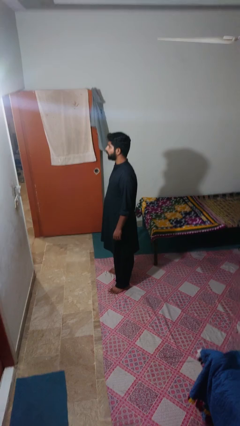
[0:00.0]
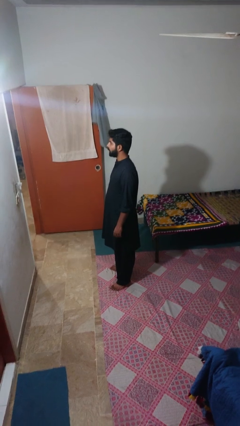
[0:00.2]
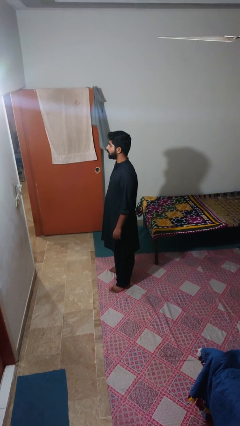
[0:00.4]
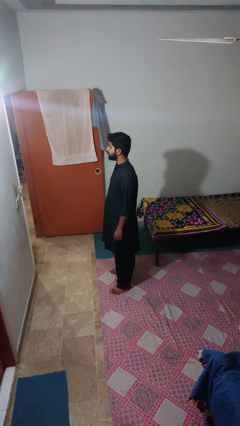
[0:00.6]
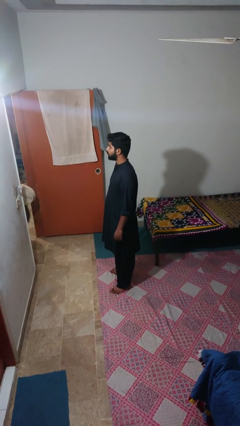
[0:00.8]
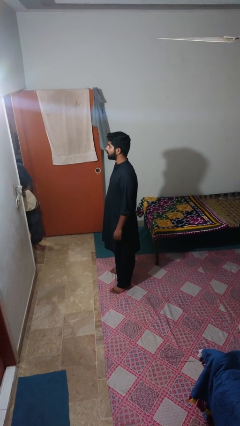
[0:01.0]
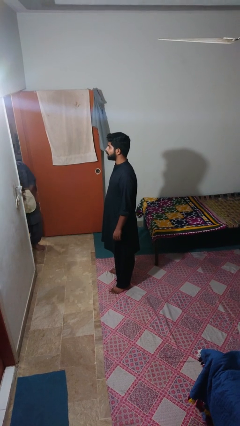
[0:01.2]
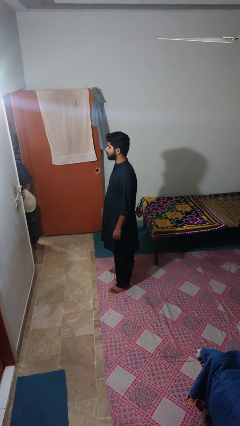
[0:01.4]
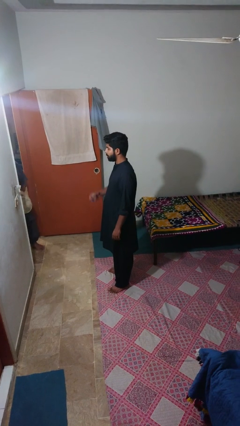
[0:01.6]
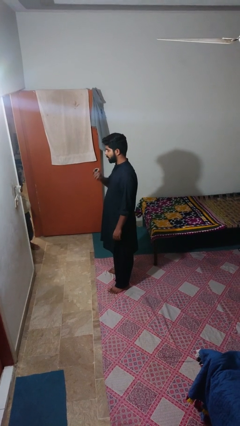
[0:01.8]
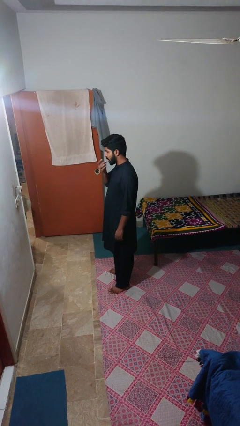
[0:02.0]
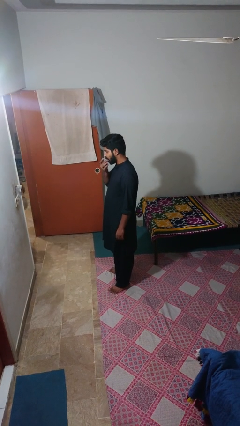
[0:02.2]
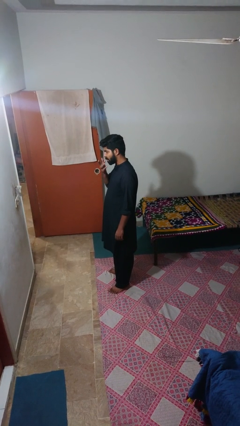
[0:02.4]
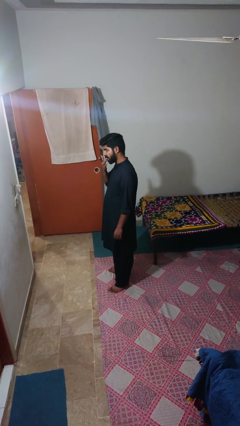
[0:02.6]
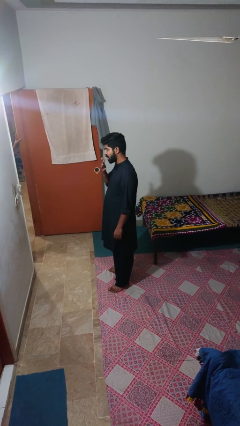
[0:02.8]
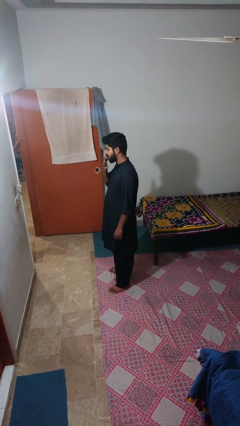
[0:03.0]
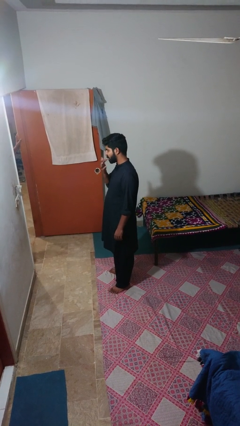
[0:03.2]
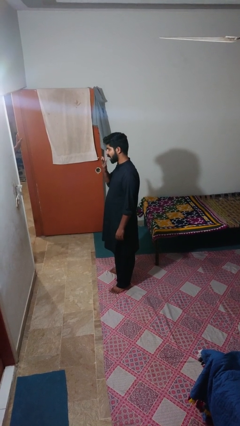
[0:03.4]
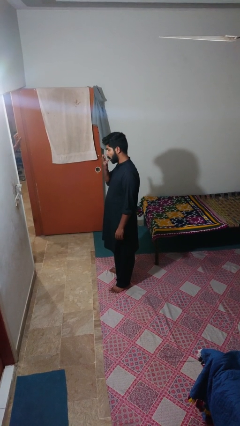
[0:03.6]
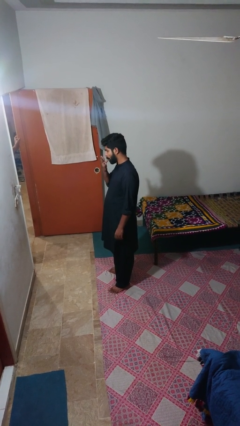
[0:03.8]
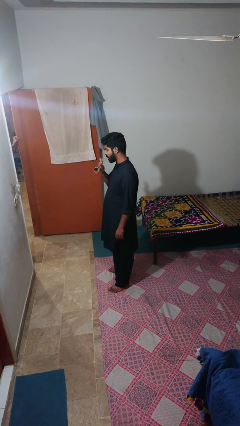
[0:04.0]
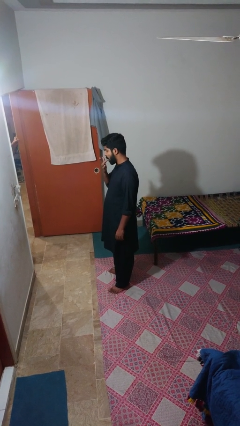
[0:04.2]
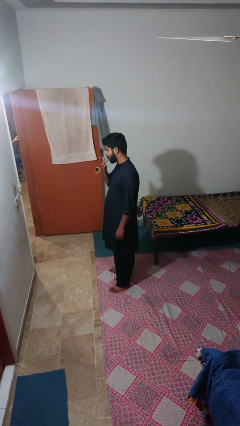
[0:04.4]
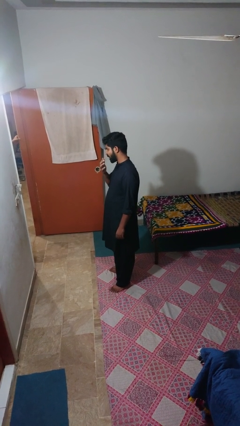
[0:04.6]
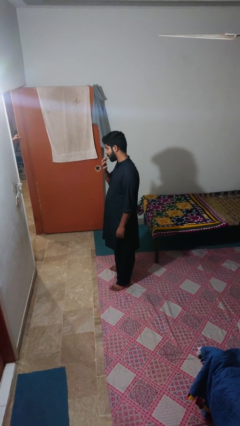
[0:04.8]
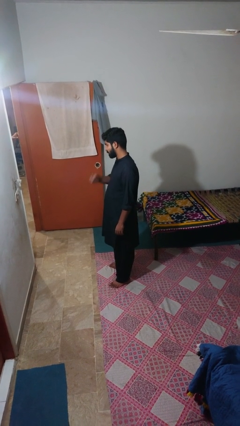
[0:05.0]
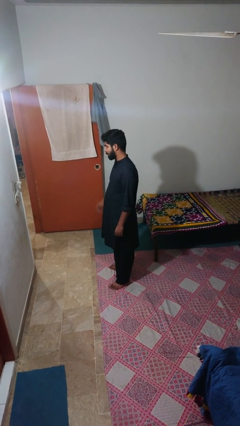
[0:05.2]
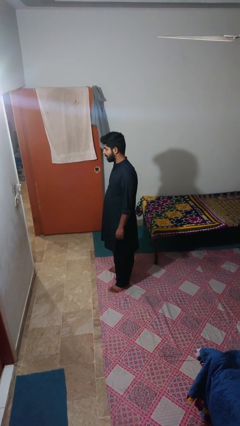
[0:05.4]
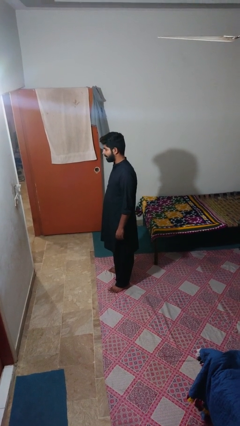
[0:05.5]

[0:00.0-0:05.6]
person licks fingers

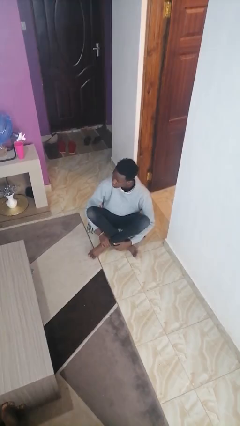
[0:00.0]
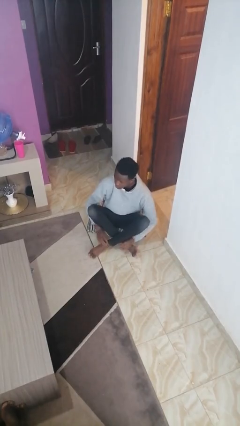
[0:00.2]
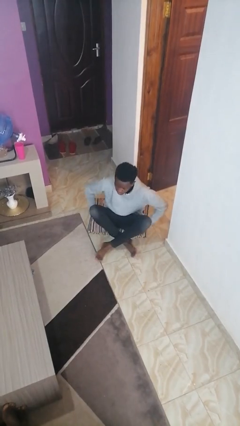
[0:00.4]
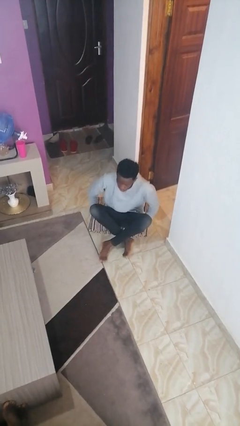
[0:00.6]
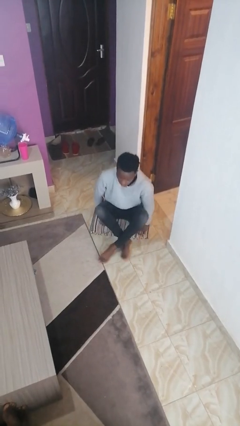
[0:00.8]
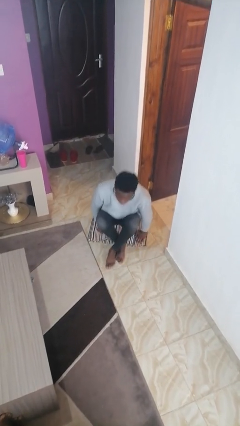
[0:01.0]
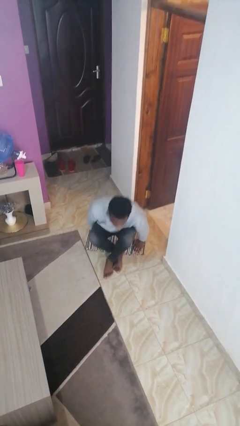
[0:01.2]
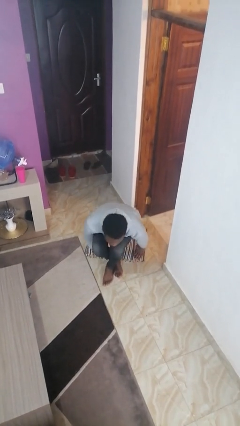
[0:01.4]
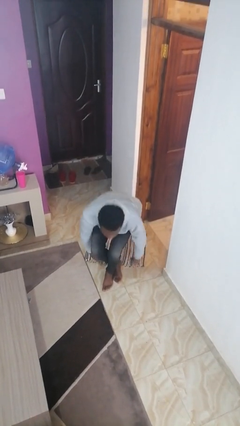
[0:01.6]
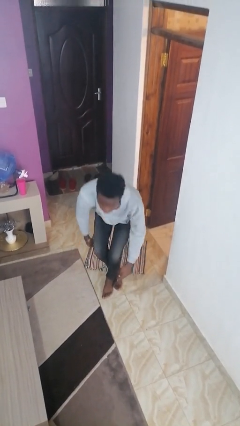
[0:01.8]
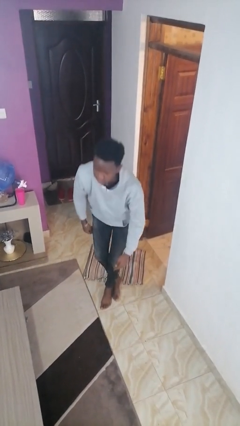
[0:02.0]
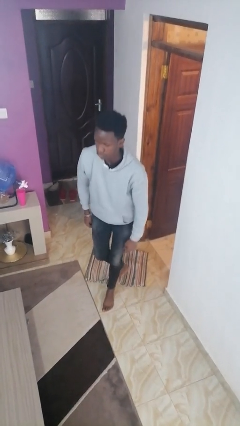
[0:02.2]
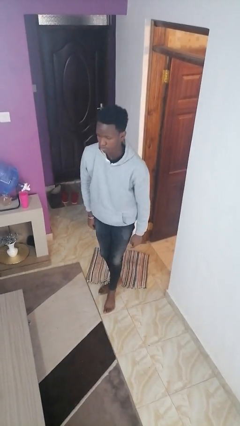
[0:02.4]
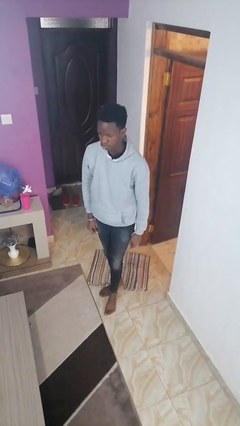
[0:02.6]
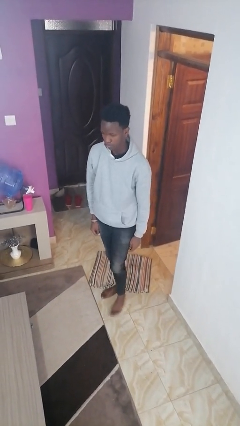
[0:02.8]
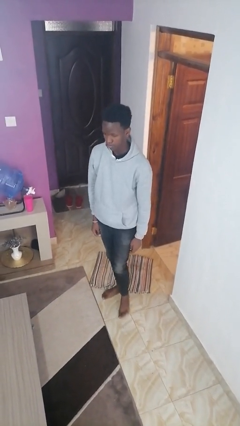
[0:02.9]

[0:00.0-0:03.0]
person stands up from floor

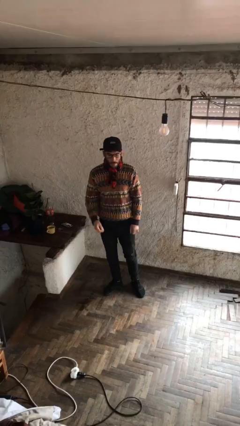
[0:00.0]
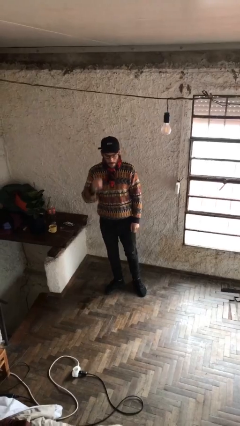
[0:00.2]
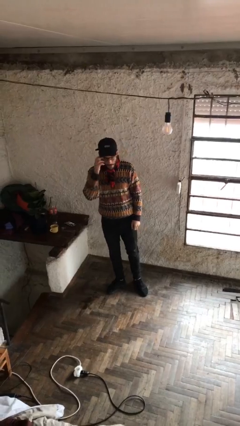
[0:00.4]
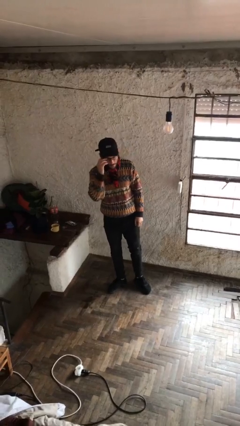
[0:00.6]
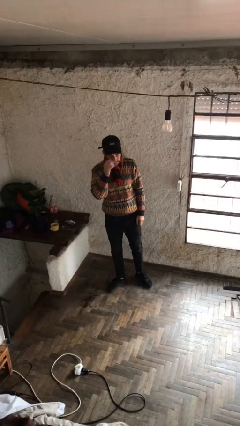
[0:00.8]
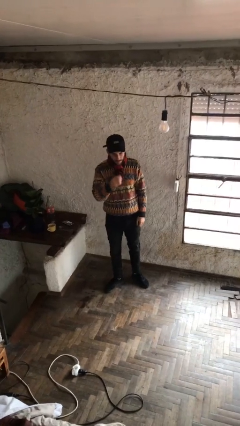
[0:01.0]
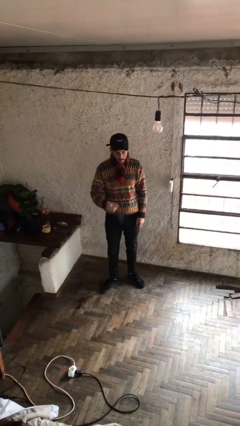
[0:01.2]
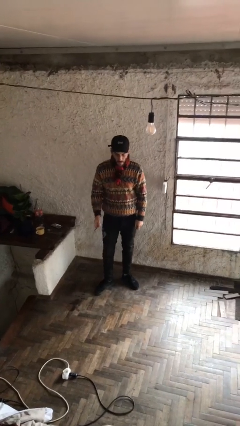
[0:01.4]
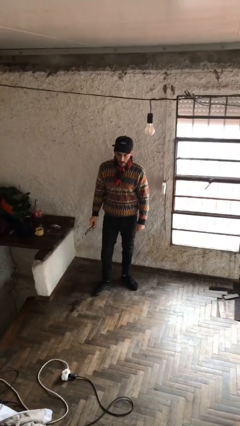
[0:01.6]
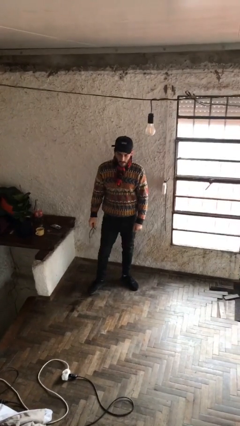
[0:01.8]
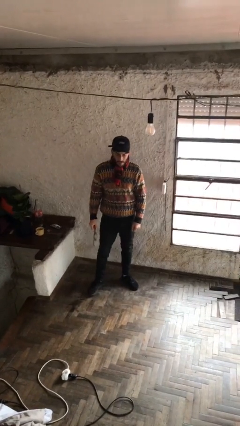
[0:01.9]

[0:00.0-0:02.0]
person takes off glasses

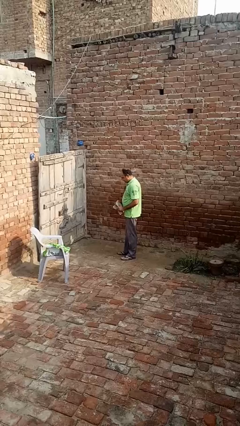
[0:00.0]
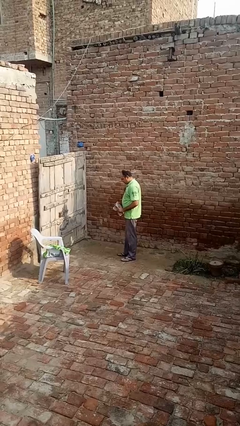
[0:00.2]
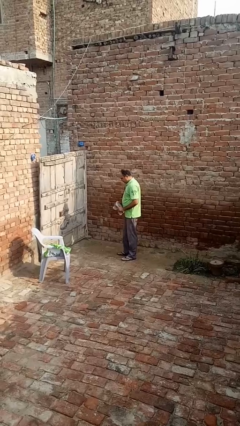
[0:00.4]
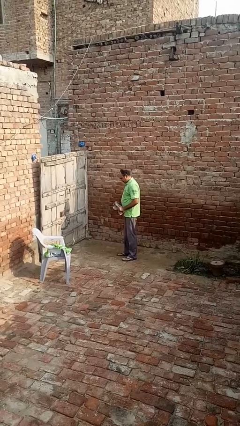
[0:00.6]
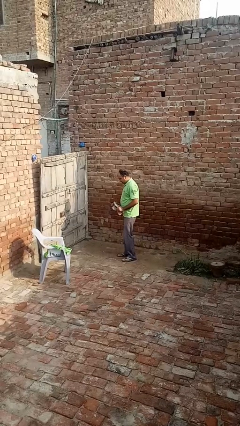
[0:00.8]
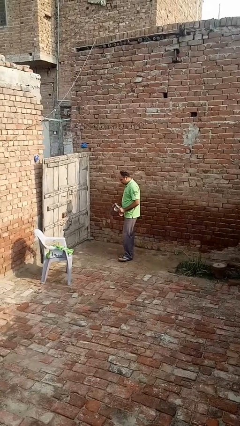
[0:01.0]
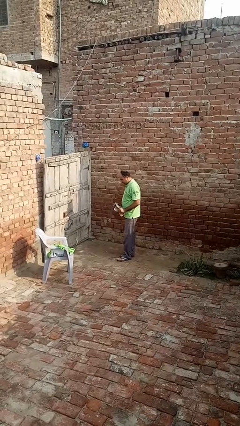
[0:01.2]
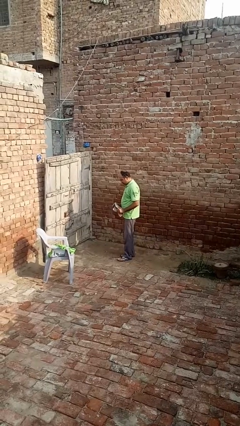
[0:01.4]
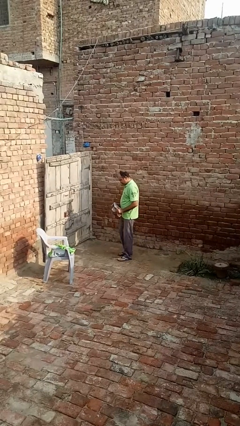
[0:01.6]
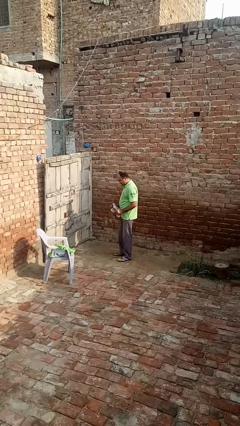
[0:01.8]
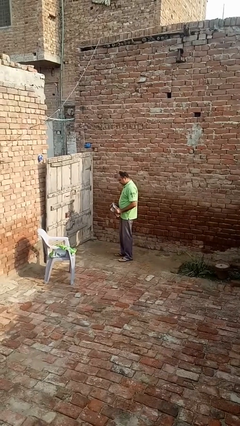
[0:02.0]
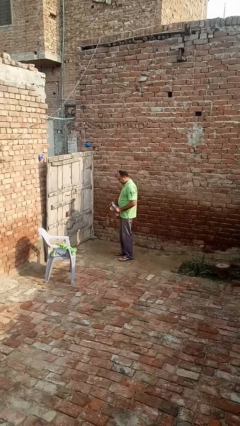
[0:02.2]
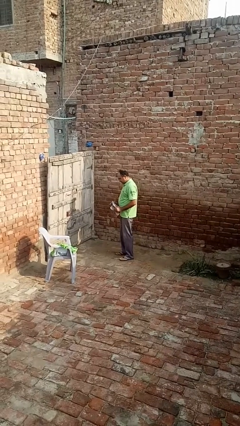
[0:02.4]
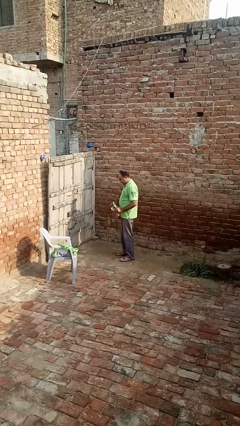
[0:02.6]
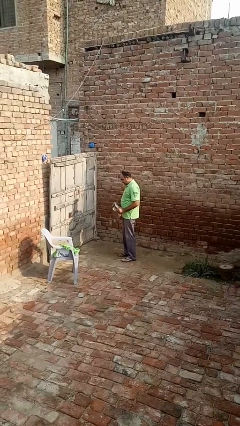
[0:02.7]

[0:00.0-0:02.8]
person carries furniture

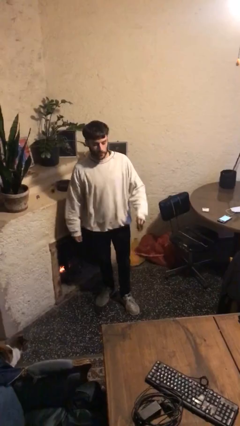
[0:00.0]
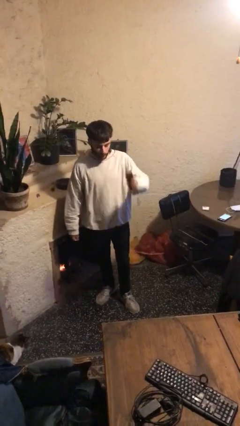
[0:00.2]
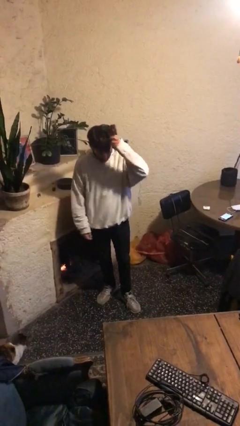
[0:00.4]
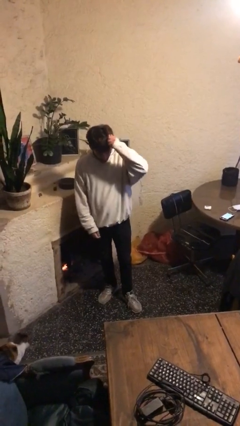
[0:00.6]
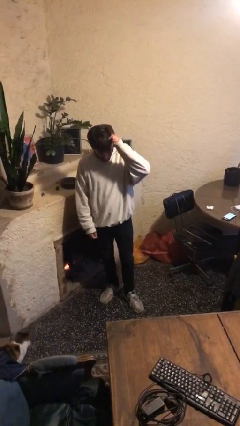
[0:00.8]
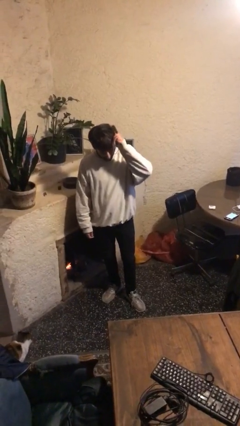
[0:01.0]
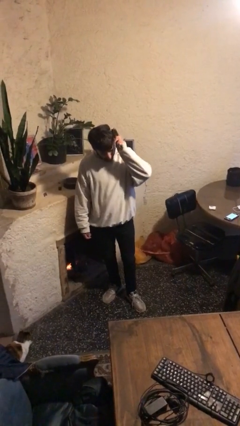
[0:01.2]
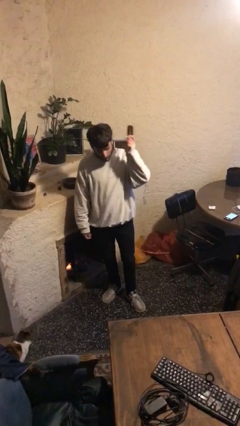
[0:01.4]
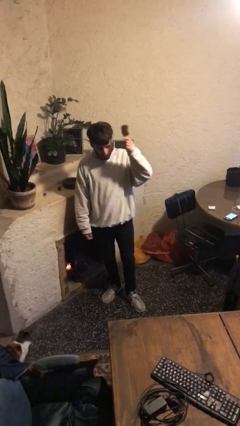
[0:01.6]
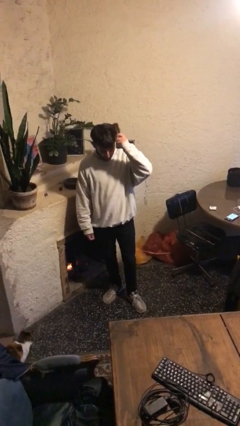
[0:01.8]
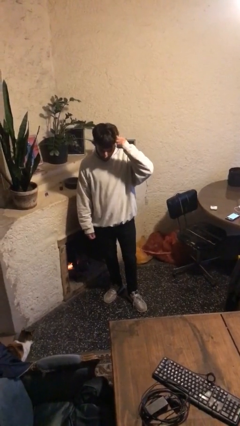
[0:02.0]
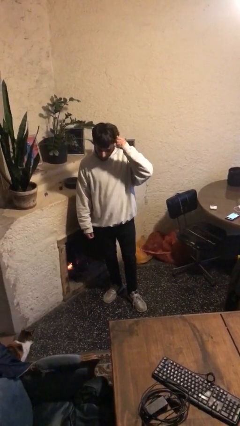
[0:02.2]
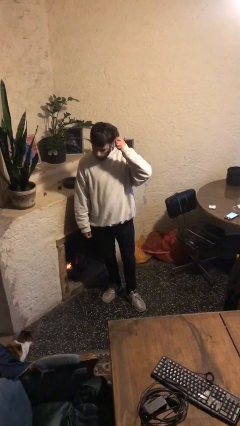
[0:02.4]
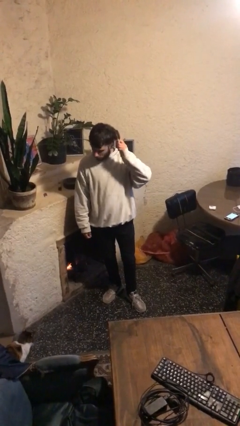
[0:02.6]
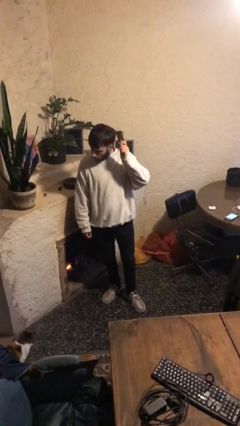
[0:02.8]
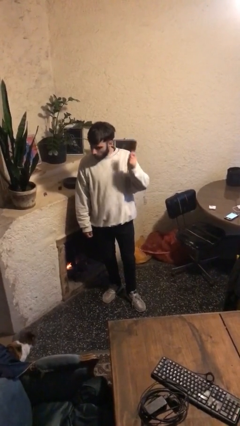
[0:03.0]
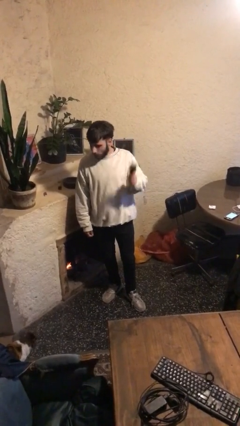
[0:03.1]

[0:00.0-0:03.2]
person brushes hair

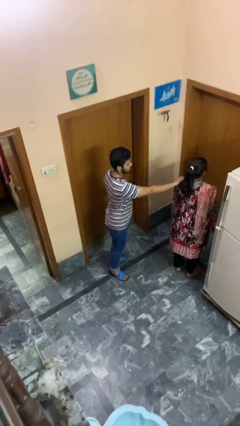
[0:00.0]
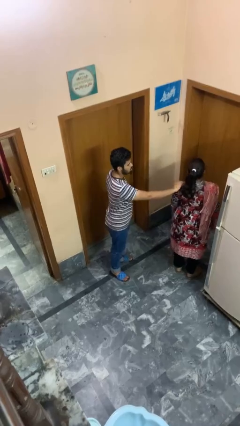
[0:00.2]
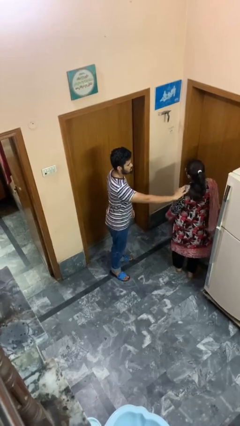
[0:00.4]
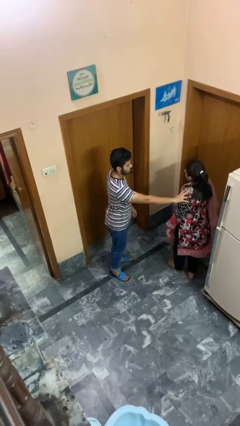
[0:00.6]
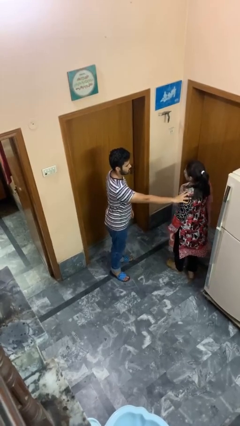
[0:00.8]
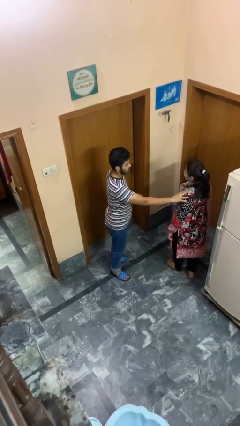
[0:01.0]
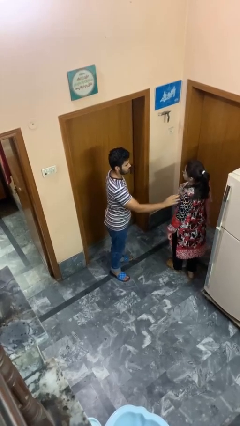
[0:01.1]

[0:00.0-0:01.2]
person spins person around
